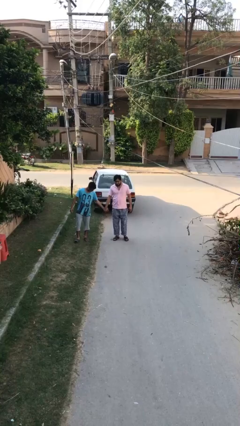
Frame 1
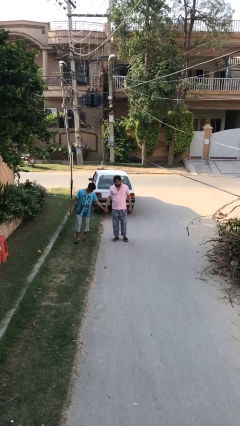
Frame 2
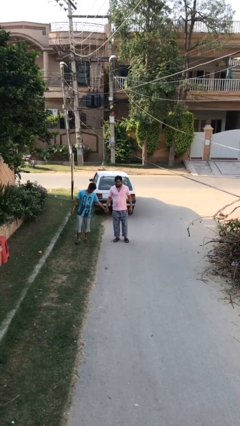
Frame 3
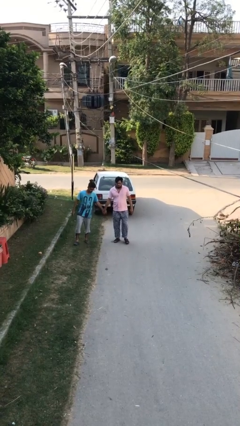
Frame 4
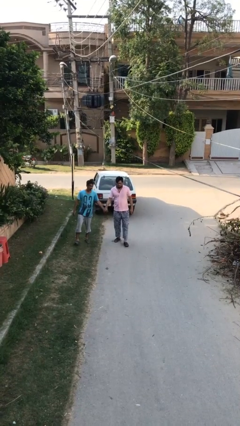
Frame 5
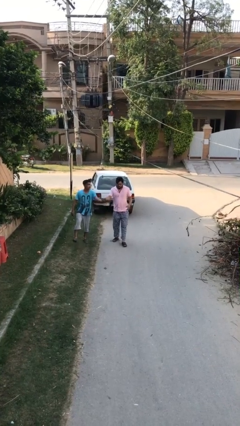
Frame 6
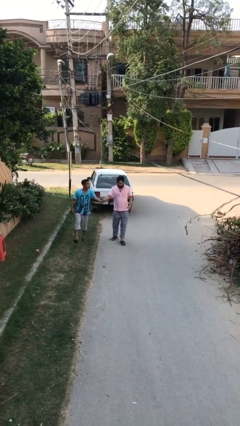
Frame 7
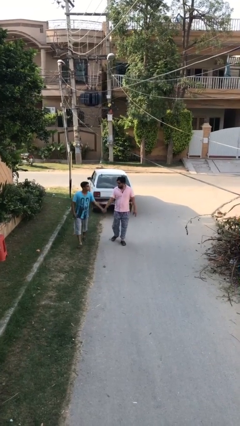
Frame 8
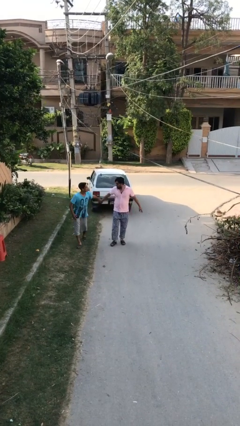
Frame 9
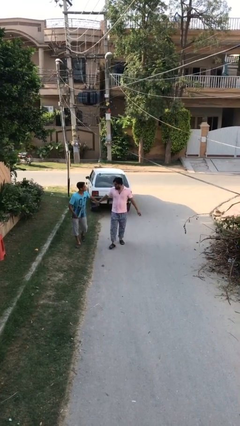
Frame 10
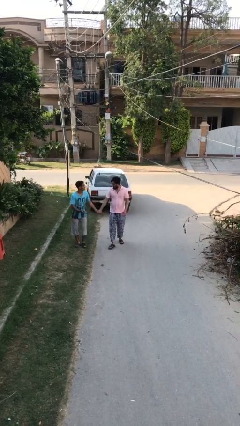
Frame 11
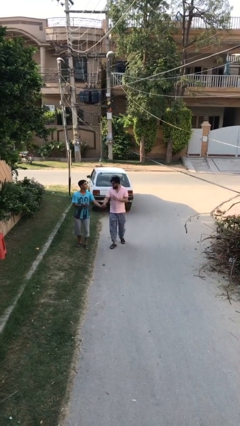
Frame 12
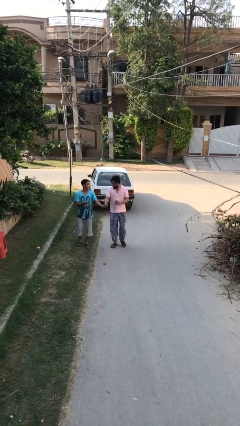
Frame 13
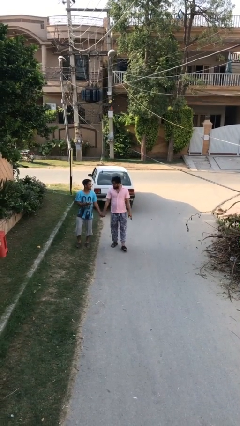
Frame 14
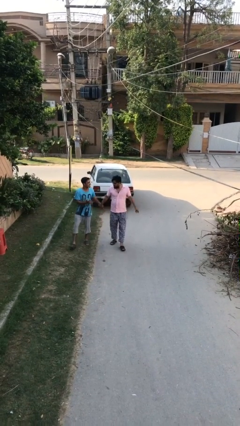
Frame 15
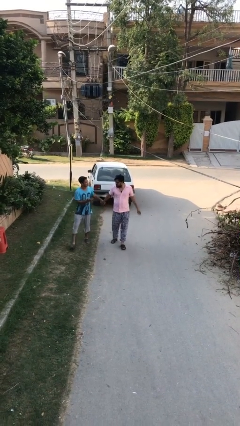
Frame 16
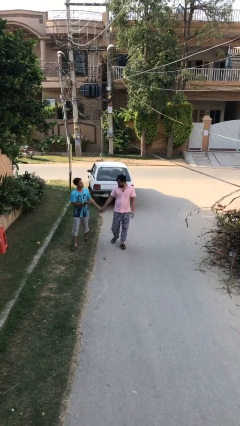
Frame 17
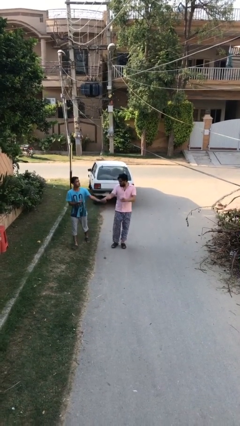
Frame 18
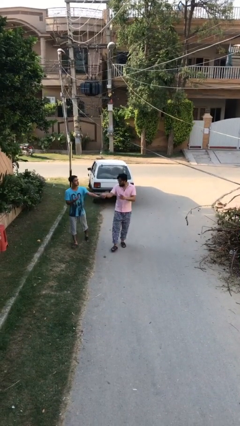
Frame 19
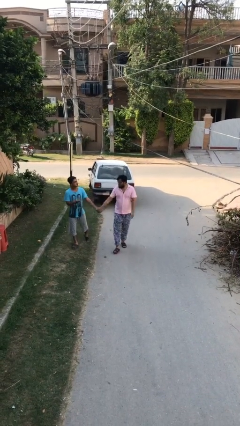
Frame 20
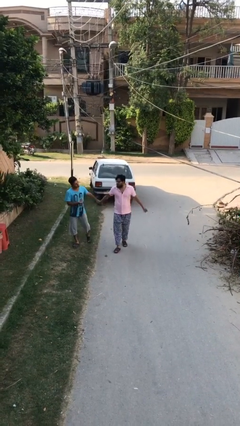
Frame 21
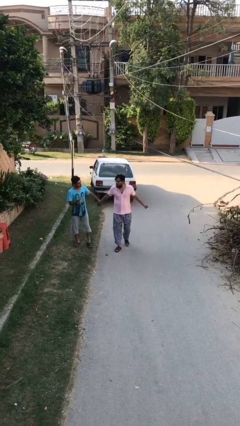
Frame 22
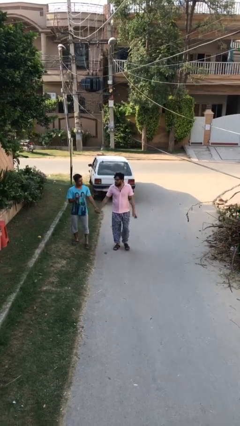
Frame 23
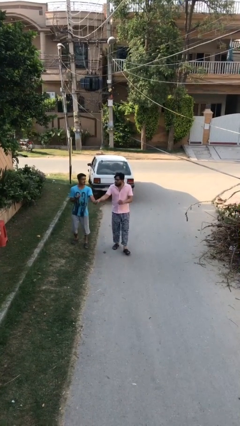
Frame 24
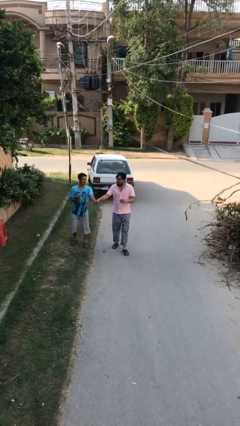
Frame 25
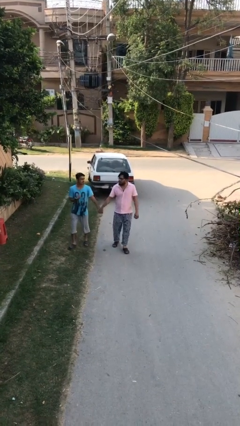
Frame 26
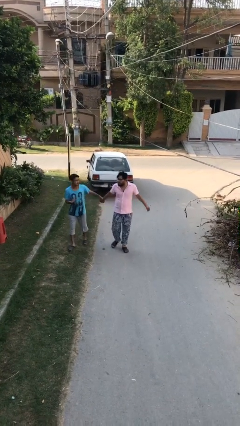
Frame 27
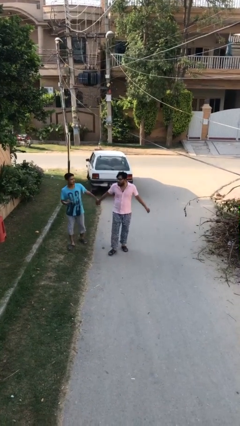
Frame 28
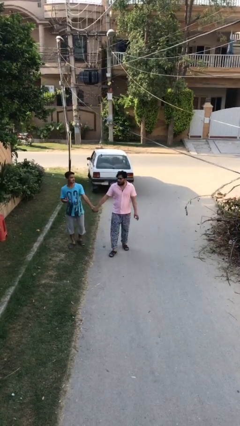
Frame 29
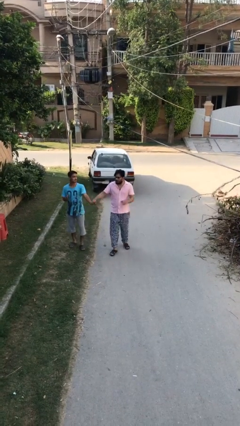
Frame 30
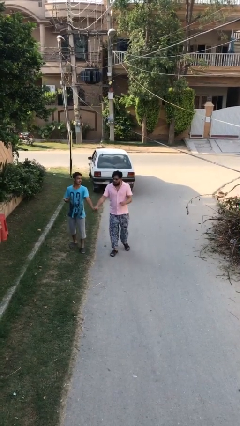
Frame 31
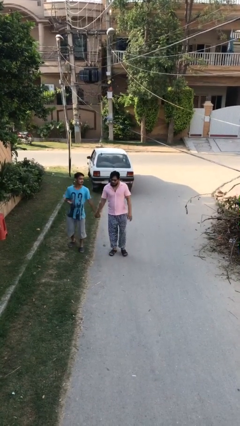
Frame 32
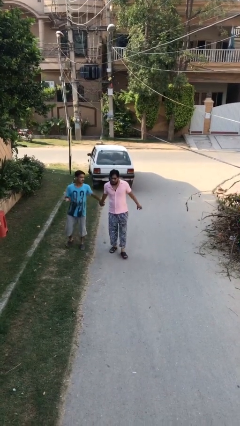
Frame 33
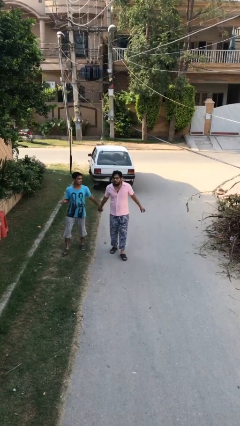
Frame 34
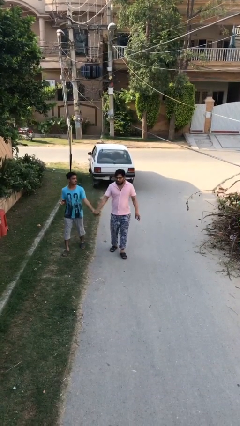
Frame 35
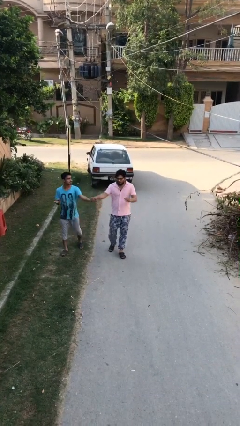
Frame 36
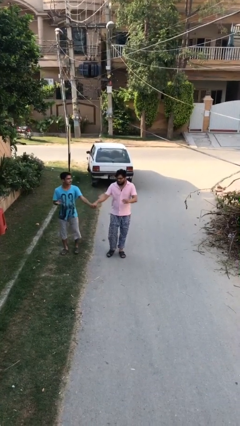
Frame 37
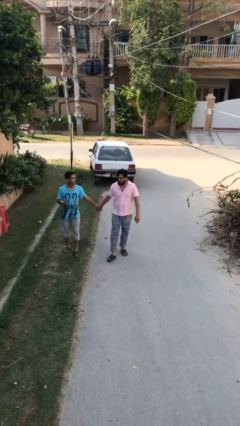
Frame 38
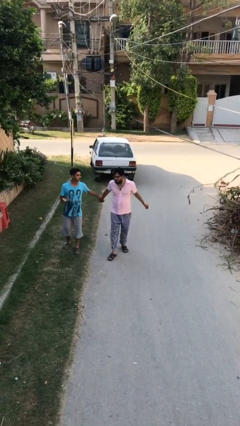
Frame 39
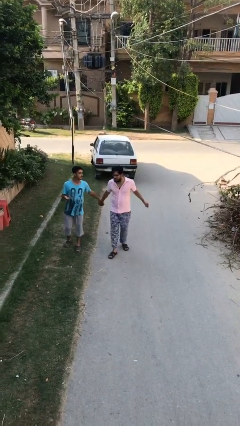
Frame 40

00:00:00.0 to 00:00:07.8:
person holds hand

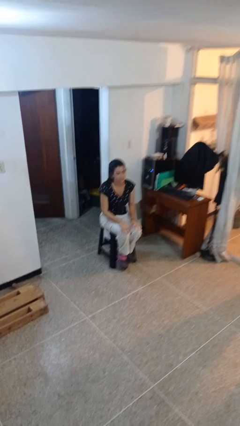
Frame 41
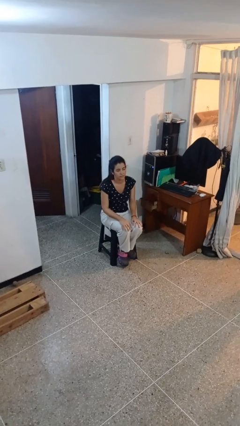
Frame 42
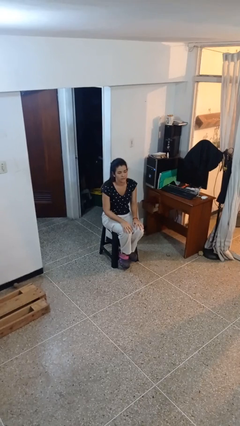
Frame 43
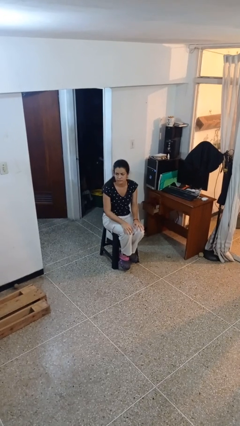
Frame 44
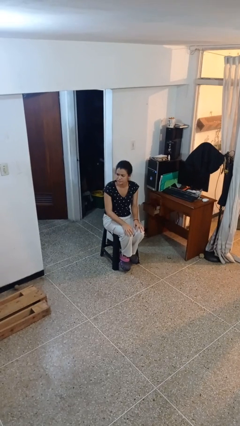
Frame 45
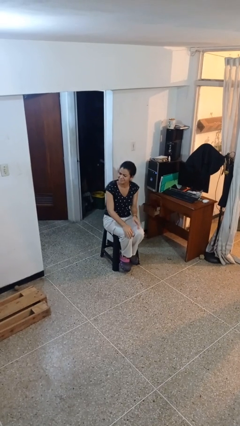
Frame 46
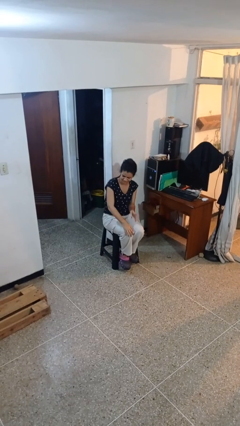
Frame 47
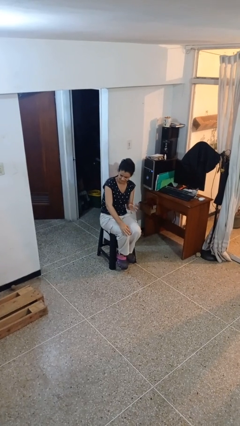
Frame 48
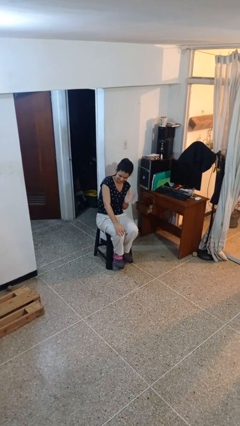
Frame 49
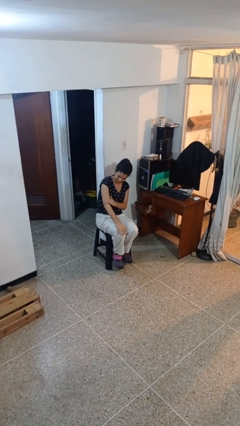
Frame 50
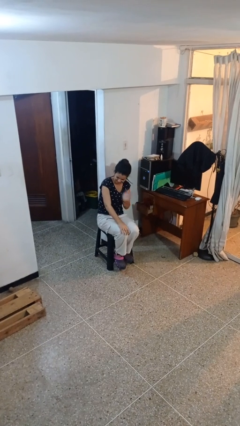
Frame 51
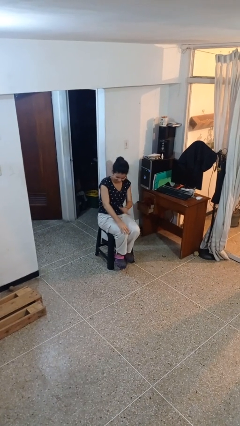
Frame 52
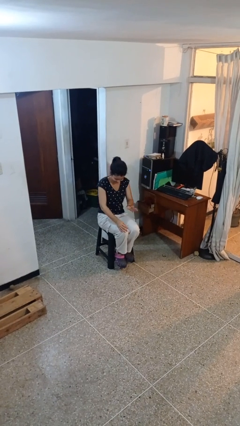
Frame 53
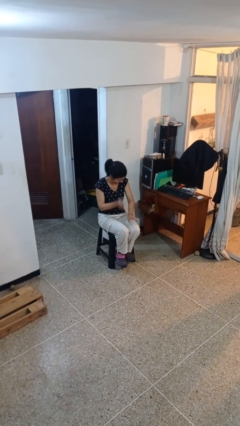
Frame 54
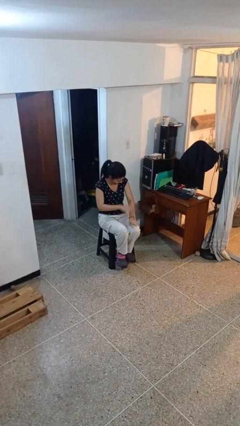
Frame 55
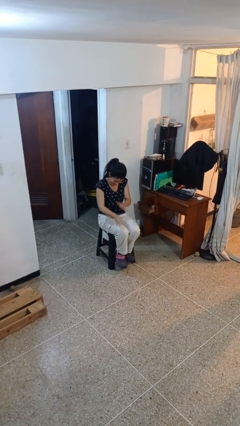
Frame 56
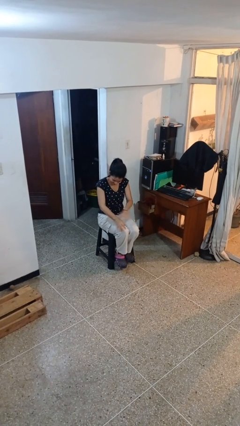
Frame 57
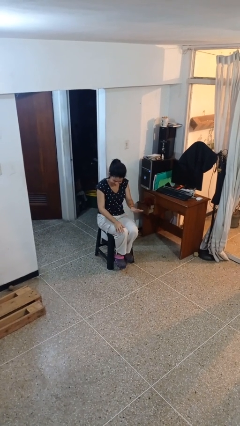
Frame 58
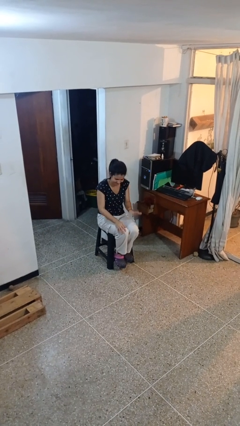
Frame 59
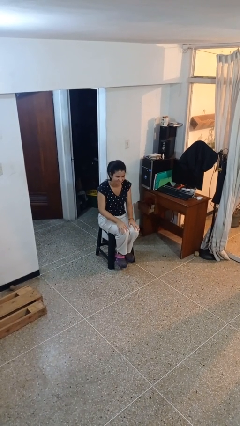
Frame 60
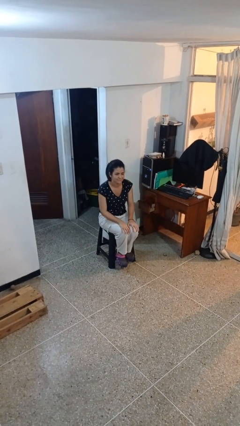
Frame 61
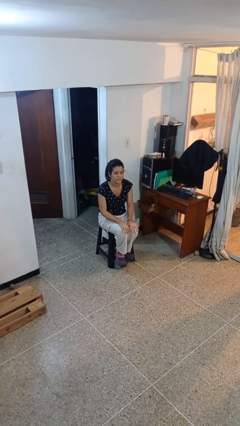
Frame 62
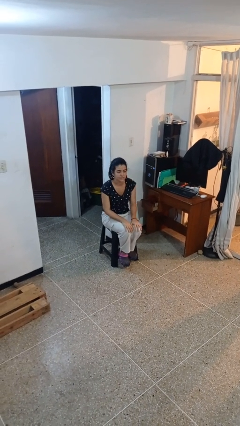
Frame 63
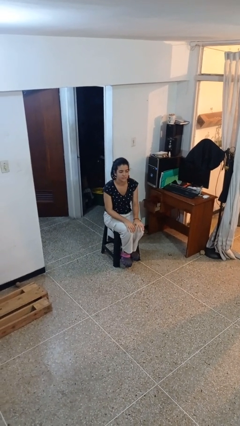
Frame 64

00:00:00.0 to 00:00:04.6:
person swats bug

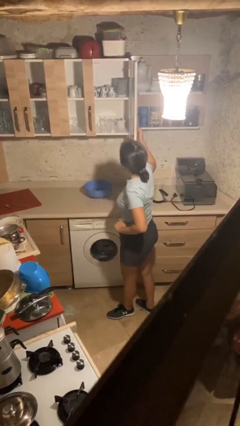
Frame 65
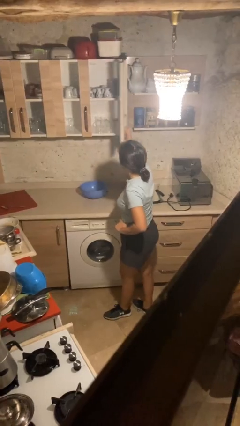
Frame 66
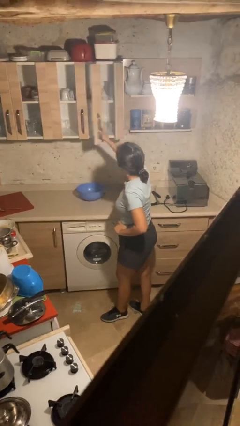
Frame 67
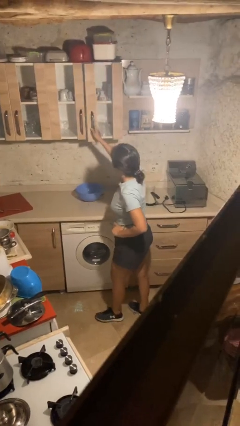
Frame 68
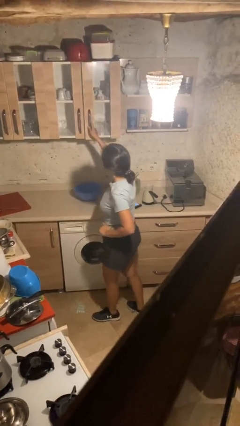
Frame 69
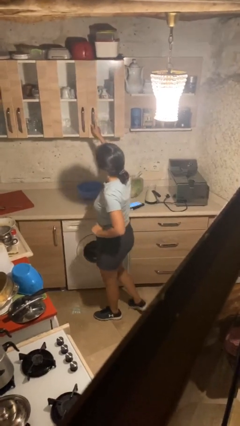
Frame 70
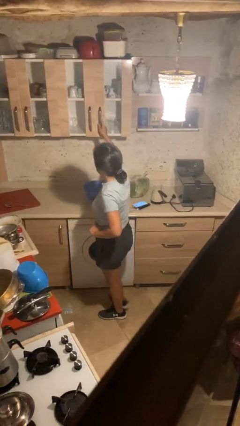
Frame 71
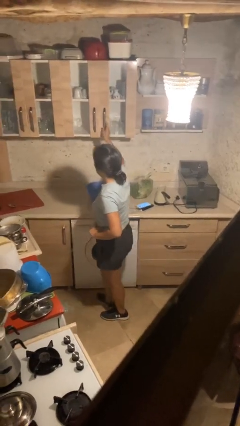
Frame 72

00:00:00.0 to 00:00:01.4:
person closes cabinet

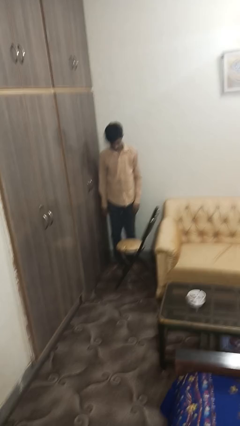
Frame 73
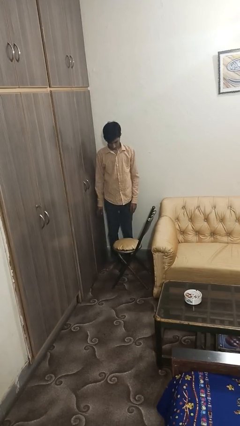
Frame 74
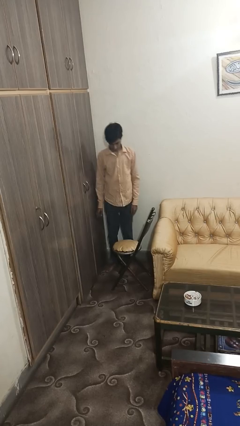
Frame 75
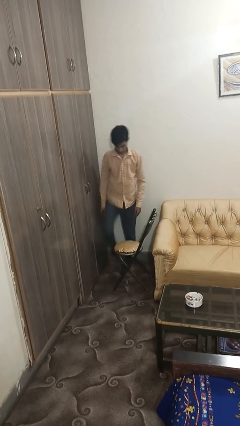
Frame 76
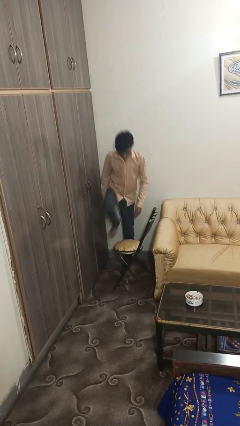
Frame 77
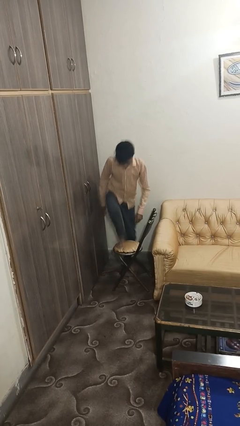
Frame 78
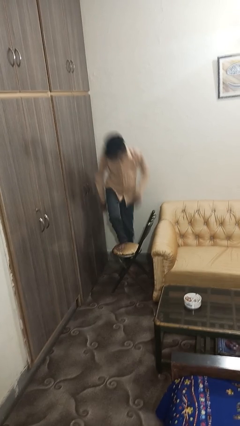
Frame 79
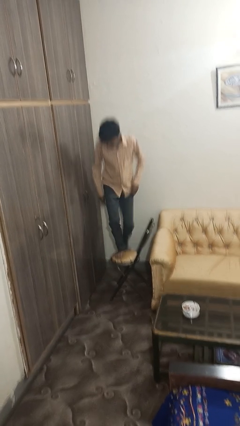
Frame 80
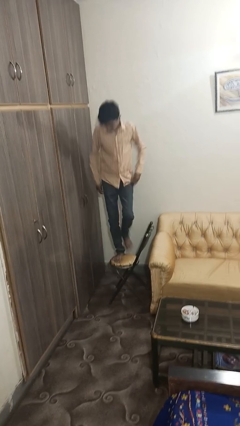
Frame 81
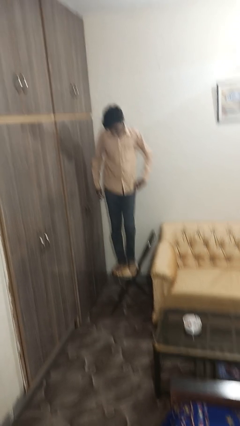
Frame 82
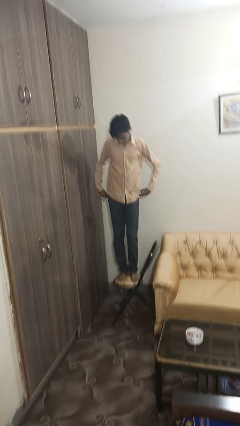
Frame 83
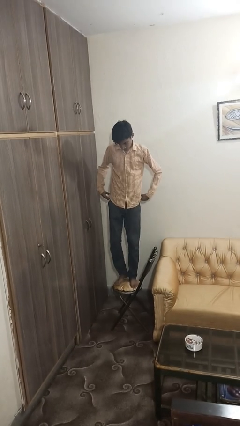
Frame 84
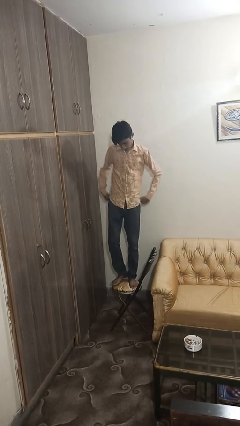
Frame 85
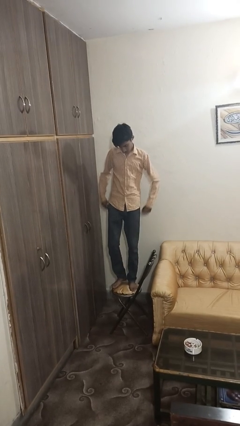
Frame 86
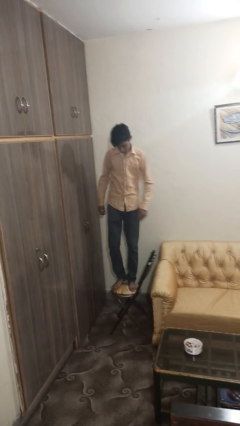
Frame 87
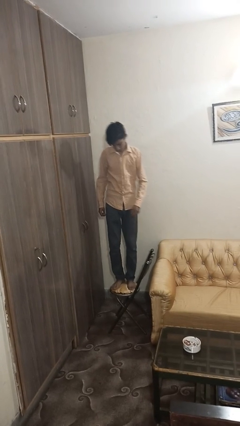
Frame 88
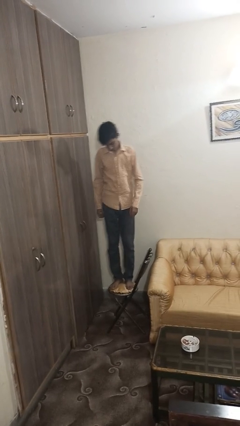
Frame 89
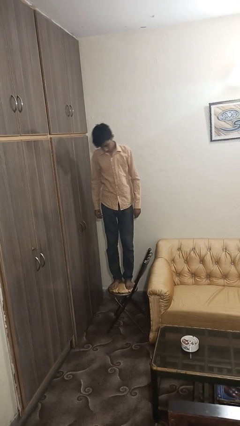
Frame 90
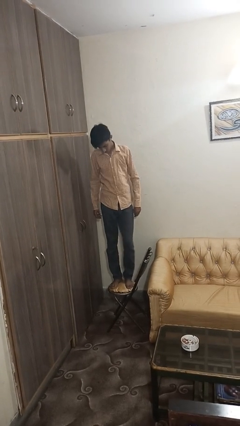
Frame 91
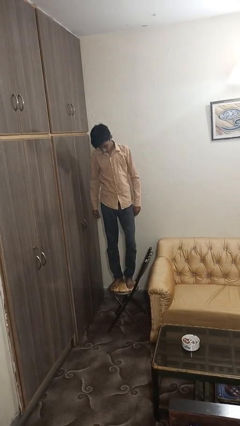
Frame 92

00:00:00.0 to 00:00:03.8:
person climbs on chair

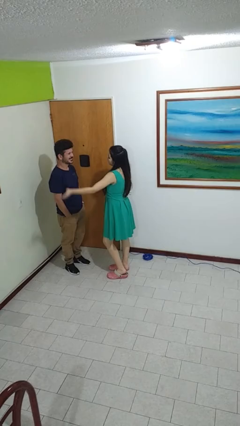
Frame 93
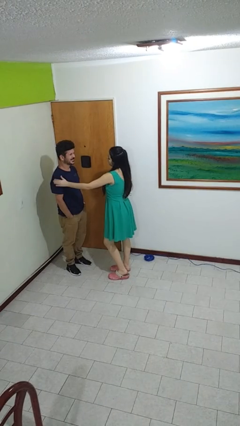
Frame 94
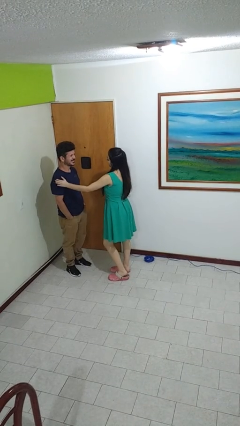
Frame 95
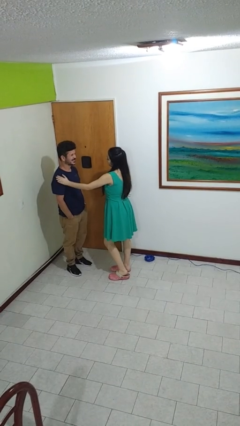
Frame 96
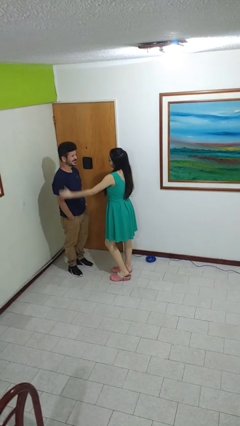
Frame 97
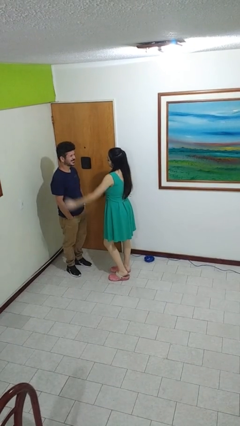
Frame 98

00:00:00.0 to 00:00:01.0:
person pounds shoulders of person
